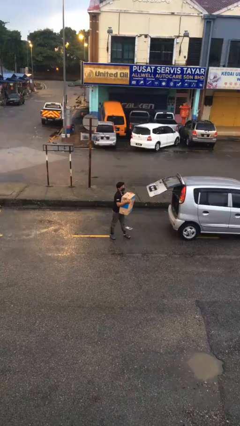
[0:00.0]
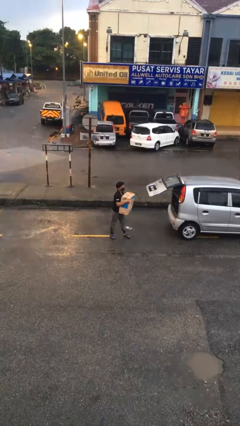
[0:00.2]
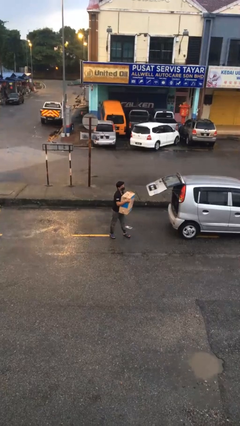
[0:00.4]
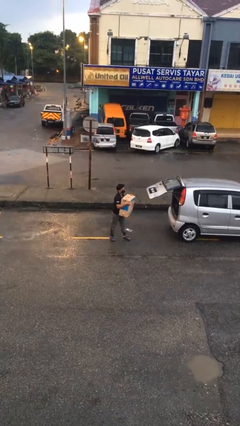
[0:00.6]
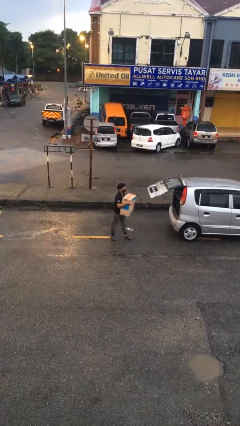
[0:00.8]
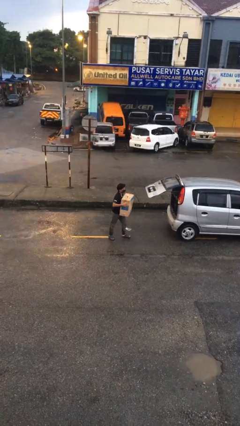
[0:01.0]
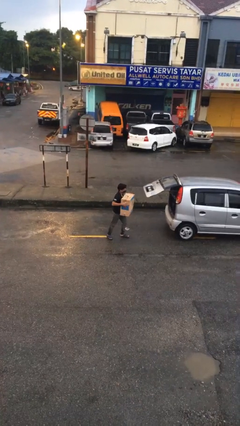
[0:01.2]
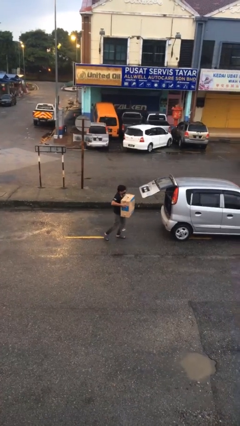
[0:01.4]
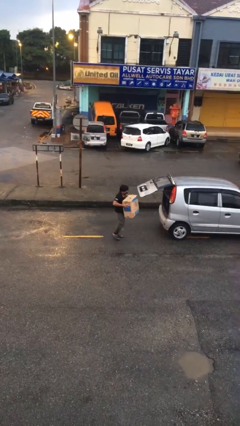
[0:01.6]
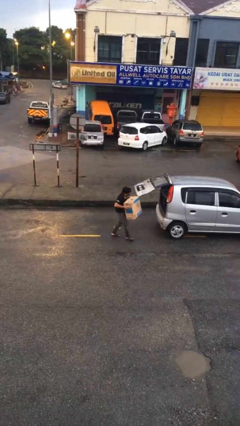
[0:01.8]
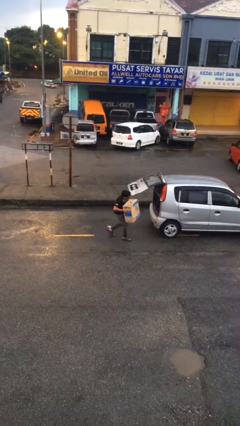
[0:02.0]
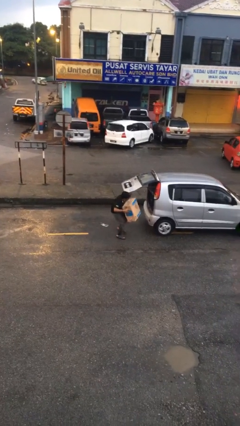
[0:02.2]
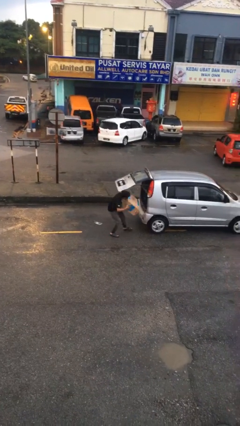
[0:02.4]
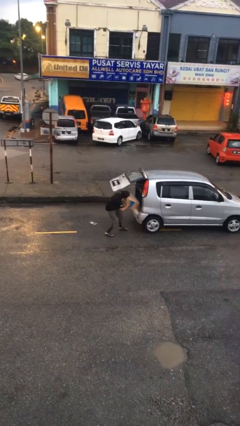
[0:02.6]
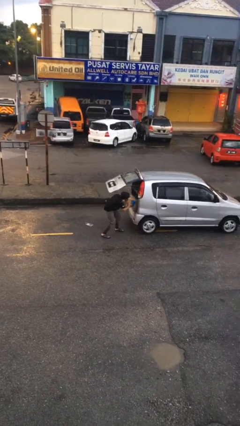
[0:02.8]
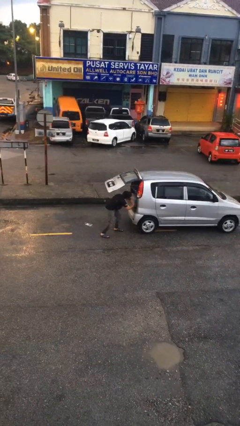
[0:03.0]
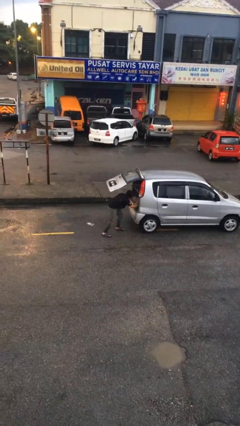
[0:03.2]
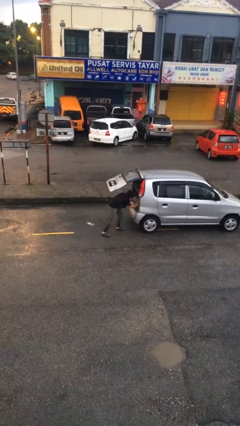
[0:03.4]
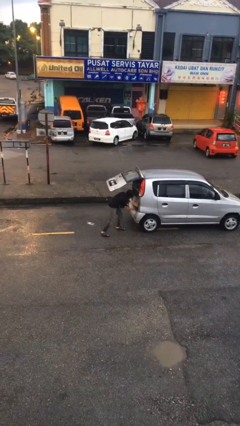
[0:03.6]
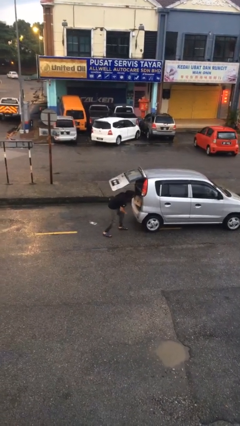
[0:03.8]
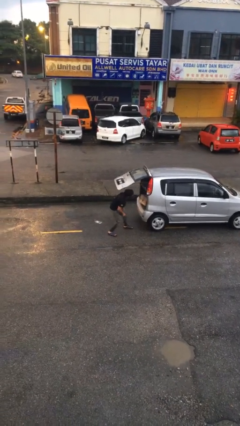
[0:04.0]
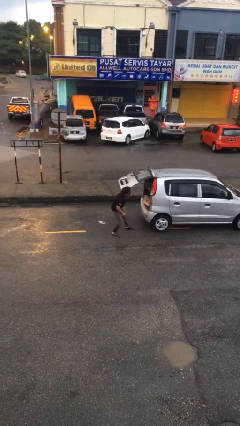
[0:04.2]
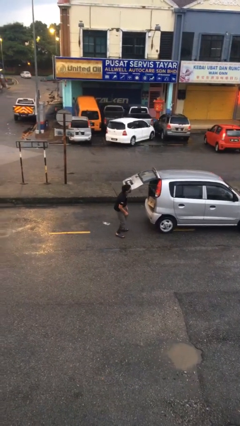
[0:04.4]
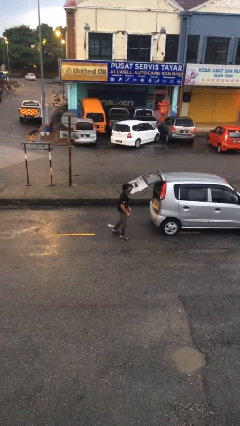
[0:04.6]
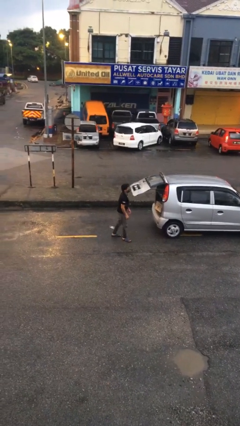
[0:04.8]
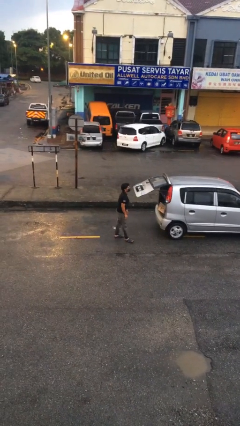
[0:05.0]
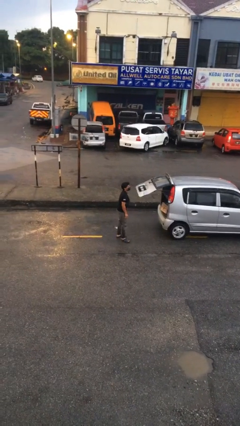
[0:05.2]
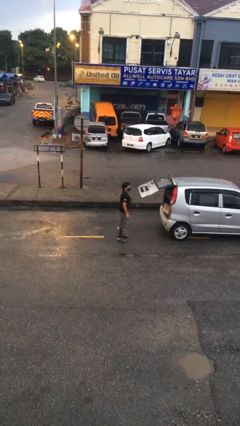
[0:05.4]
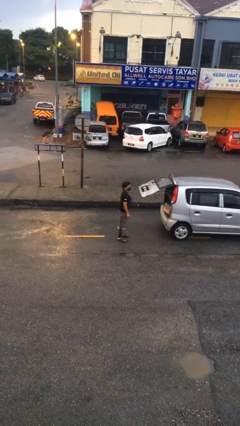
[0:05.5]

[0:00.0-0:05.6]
person loads car

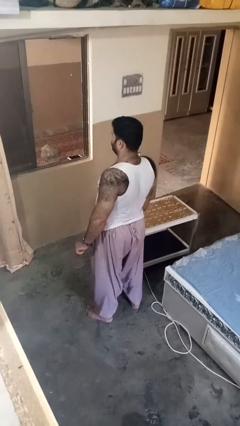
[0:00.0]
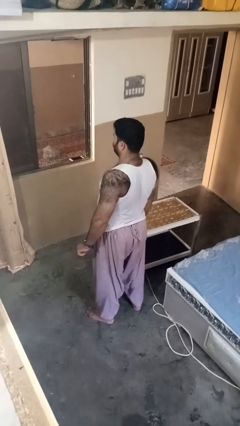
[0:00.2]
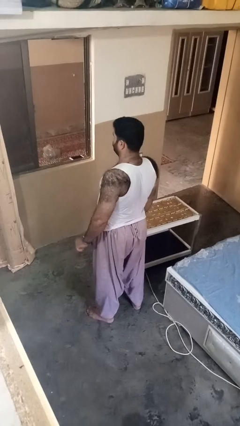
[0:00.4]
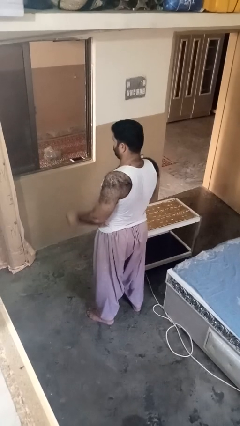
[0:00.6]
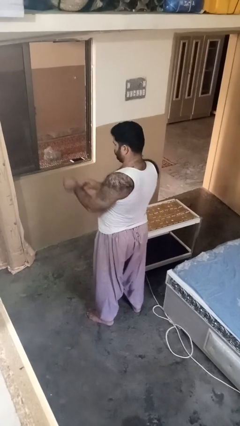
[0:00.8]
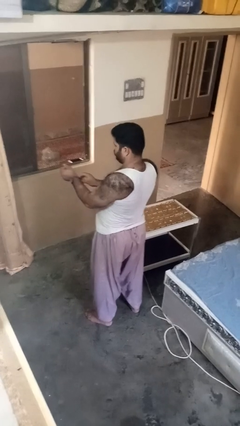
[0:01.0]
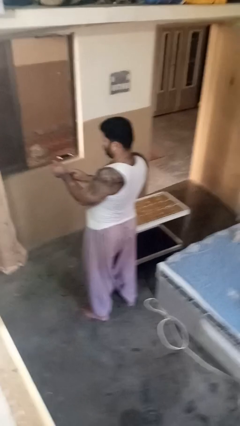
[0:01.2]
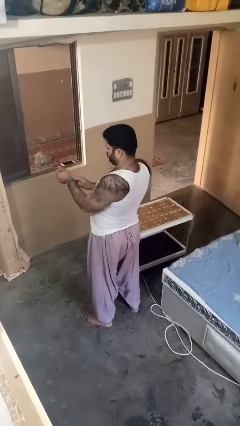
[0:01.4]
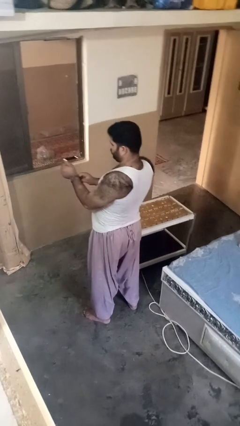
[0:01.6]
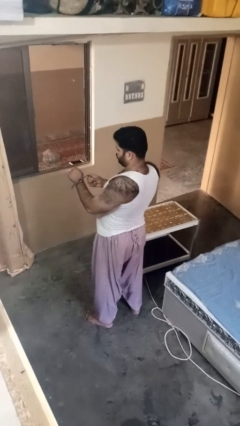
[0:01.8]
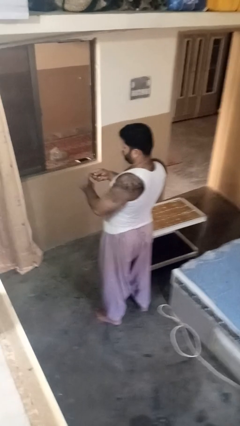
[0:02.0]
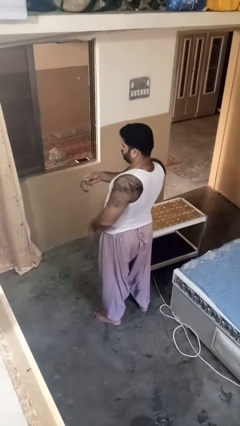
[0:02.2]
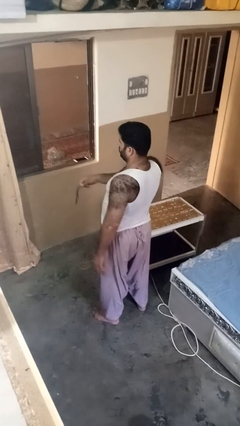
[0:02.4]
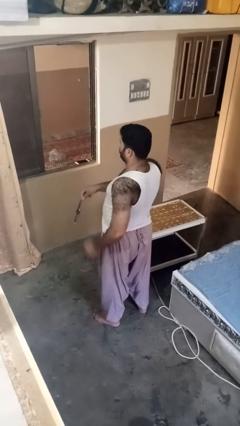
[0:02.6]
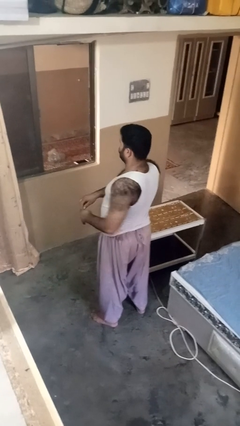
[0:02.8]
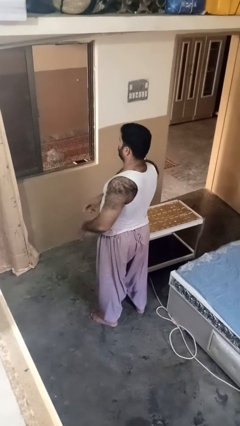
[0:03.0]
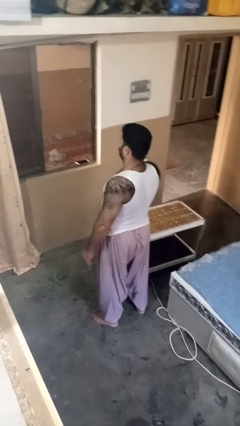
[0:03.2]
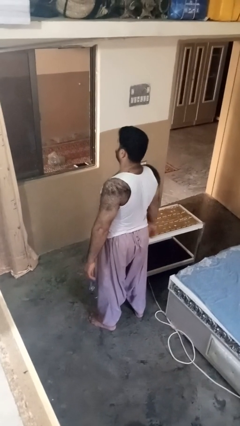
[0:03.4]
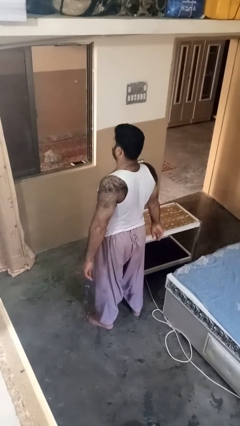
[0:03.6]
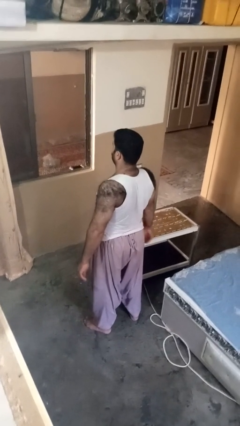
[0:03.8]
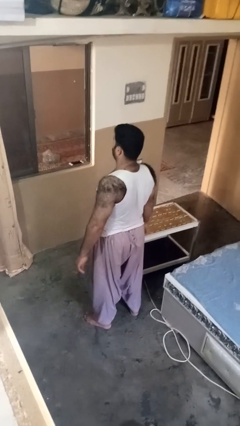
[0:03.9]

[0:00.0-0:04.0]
person takes off wristwatch

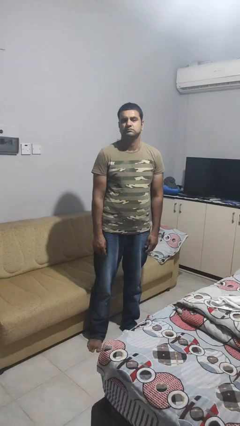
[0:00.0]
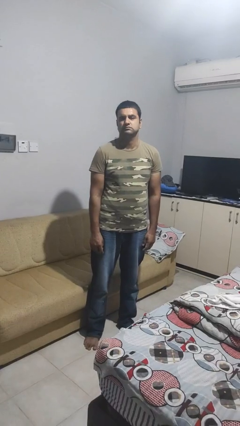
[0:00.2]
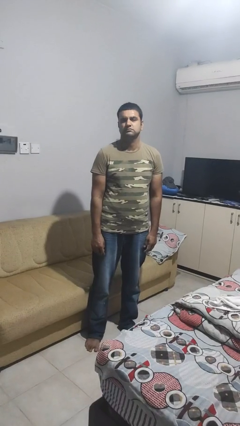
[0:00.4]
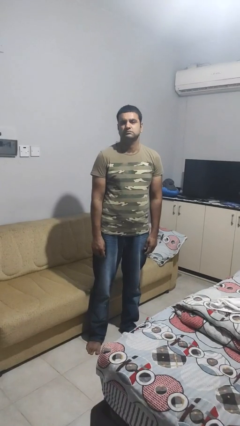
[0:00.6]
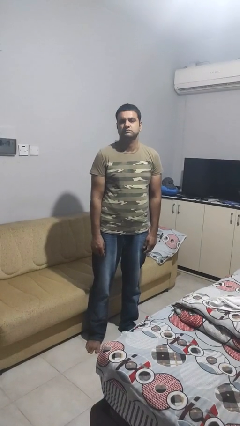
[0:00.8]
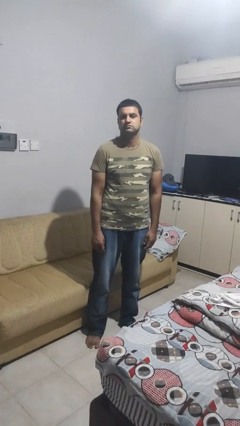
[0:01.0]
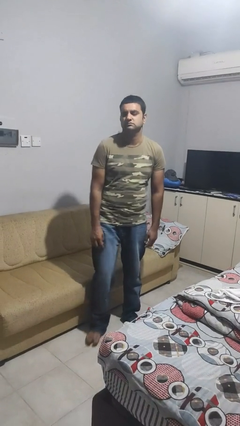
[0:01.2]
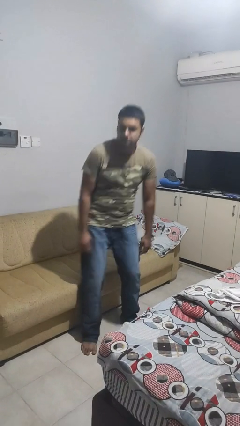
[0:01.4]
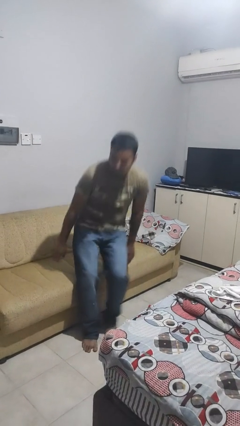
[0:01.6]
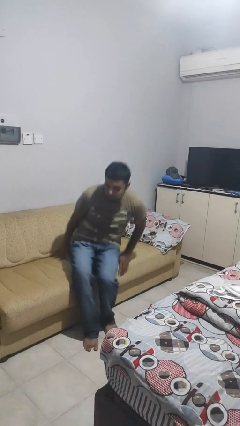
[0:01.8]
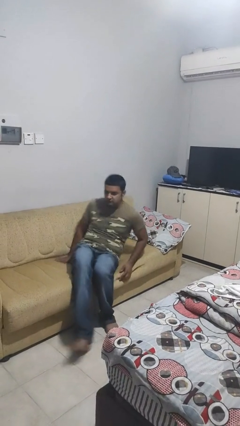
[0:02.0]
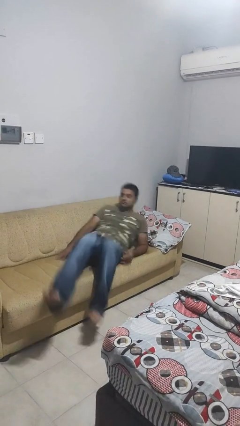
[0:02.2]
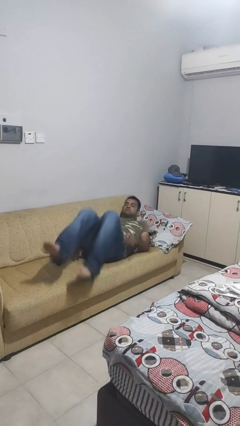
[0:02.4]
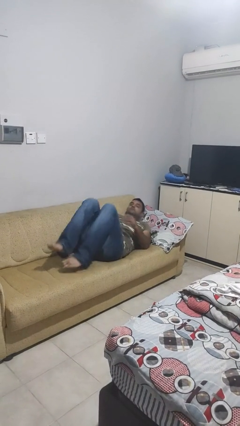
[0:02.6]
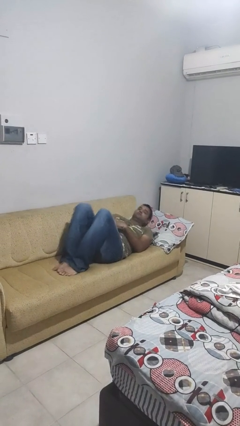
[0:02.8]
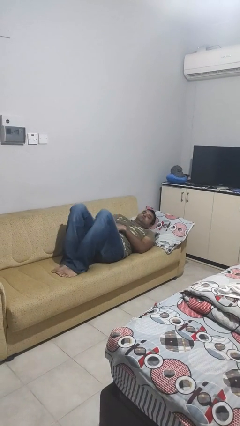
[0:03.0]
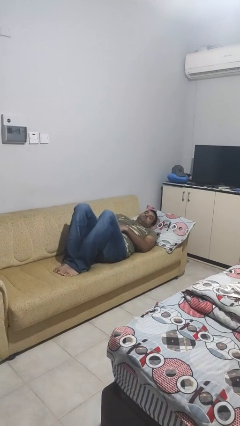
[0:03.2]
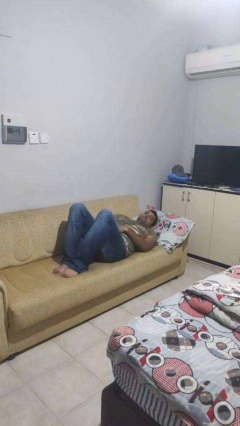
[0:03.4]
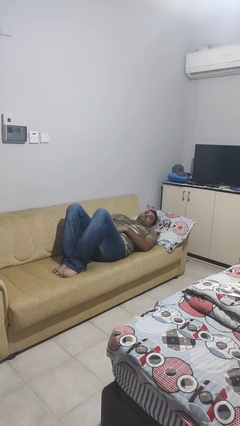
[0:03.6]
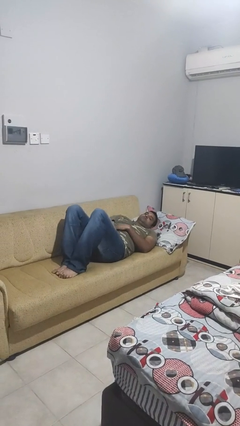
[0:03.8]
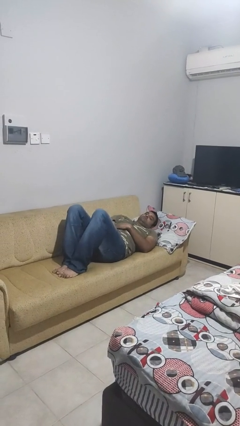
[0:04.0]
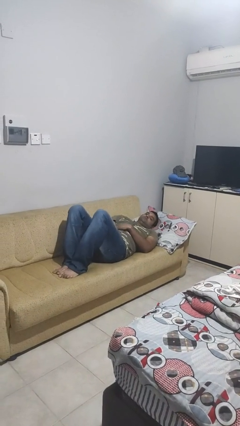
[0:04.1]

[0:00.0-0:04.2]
person lies down on couch

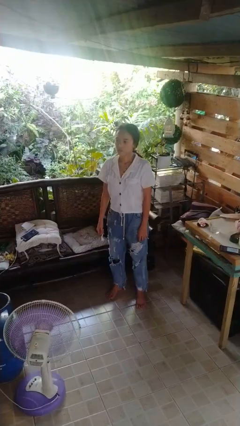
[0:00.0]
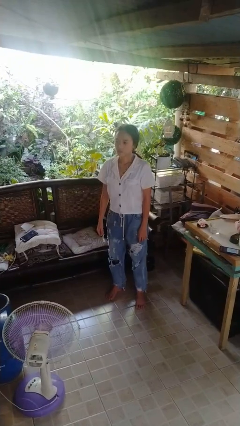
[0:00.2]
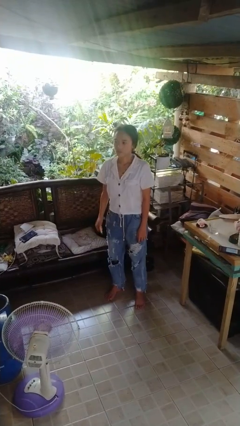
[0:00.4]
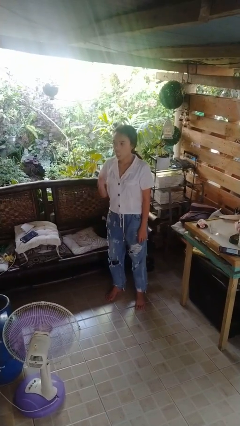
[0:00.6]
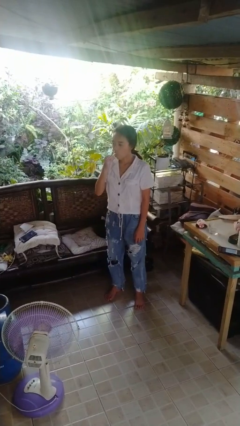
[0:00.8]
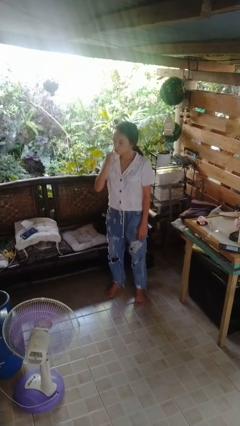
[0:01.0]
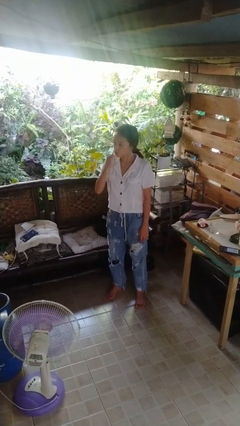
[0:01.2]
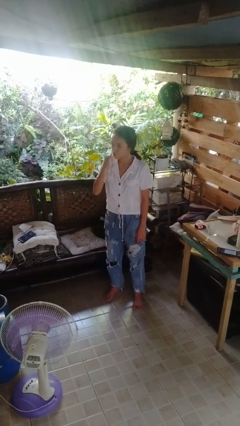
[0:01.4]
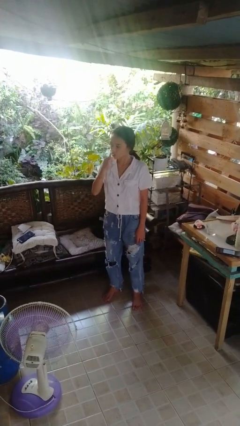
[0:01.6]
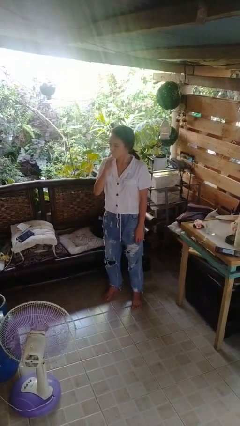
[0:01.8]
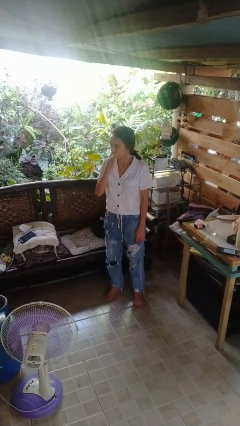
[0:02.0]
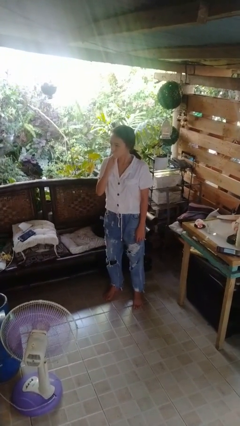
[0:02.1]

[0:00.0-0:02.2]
person brushes teeth

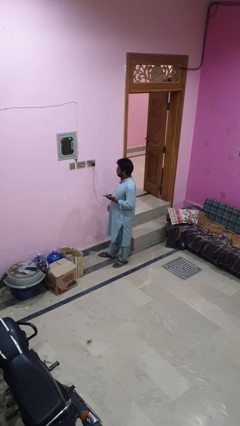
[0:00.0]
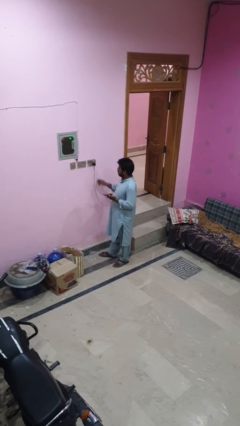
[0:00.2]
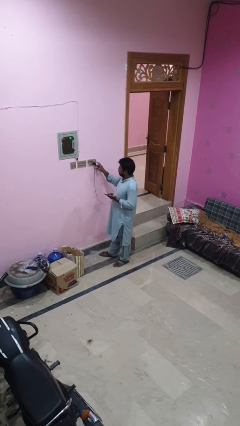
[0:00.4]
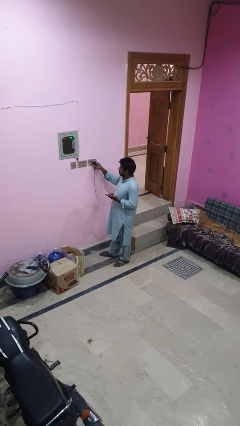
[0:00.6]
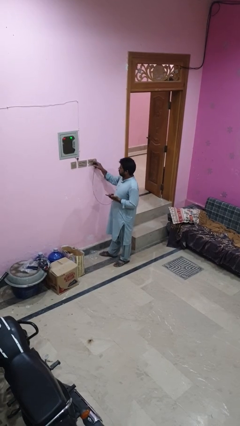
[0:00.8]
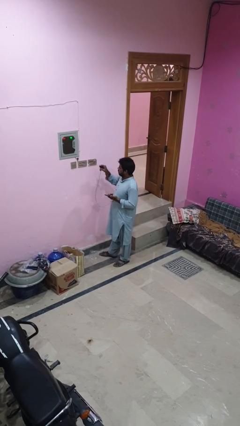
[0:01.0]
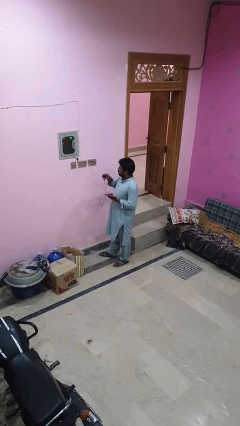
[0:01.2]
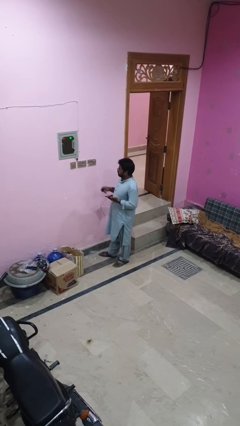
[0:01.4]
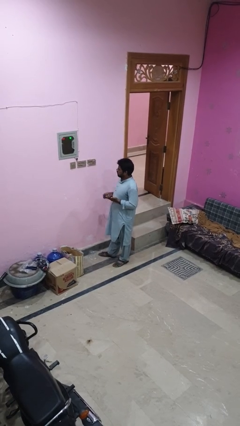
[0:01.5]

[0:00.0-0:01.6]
person unplugs from electrical socket

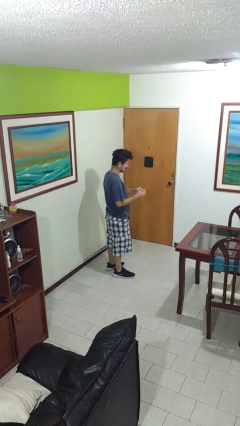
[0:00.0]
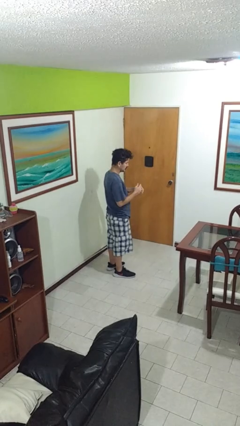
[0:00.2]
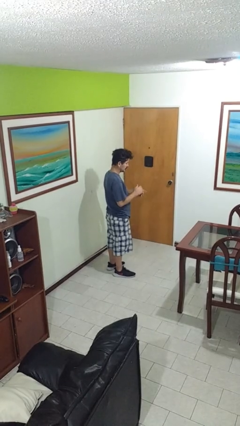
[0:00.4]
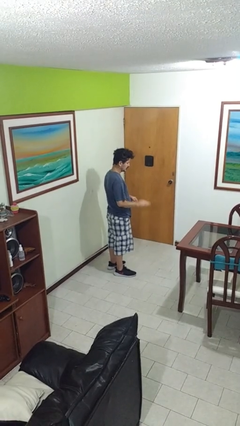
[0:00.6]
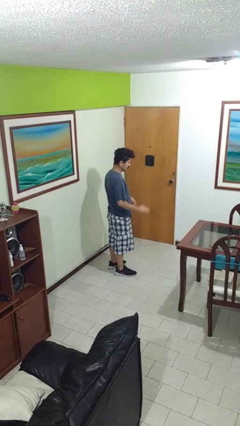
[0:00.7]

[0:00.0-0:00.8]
person puts on ring
